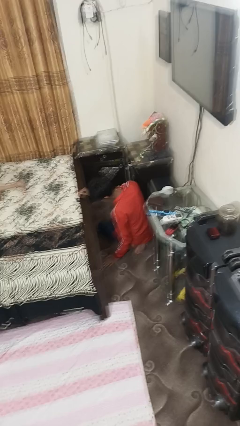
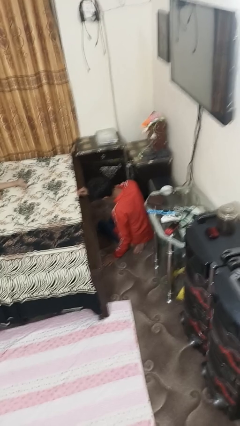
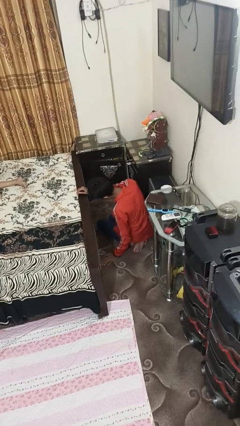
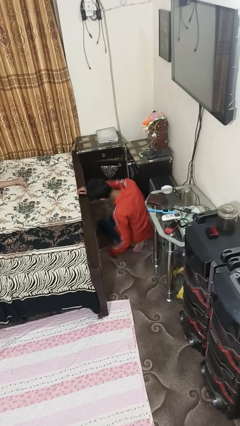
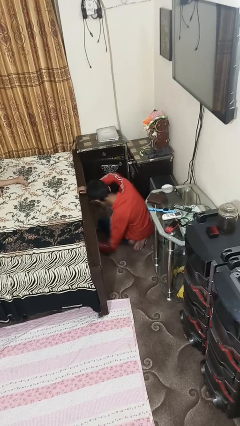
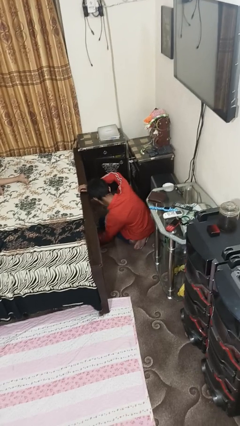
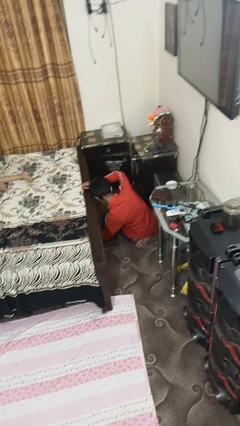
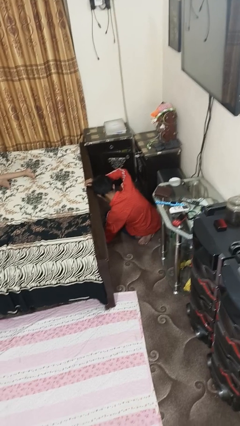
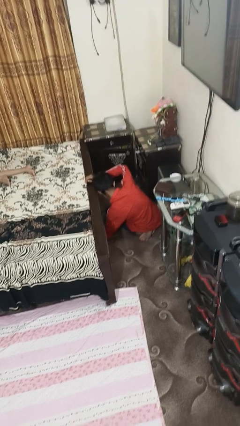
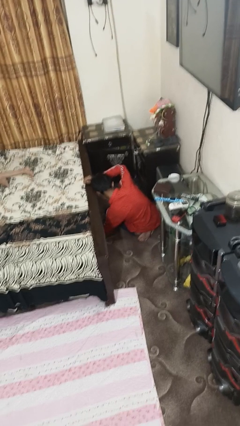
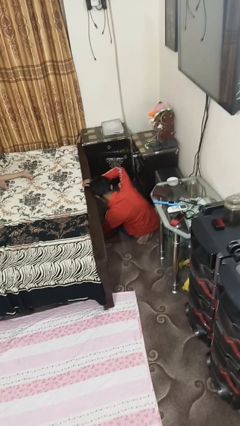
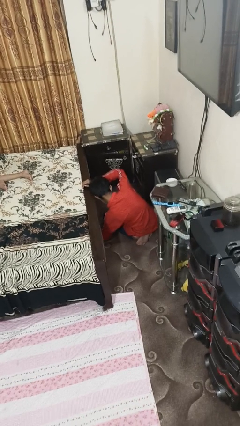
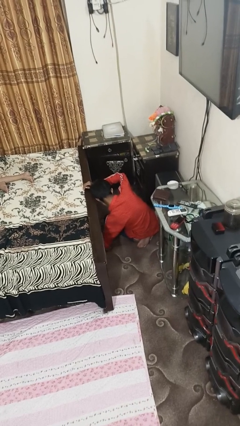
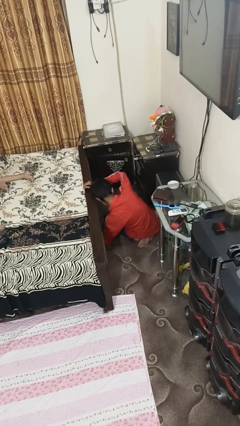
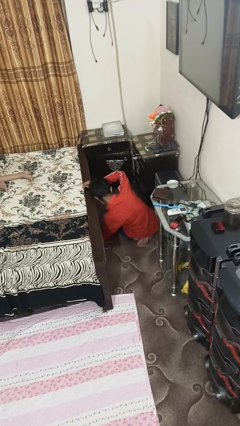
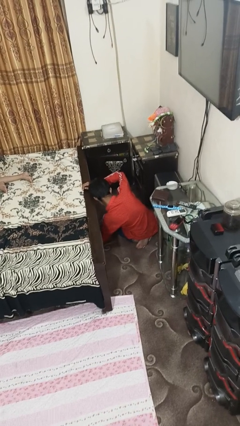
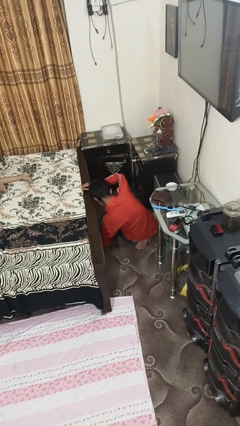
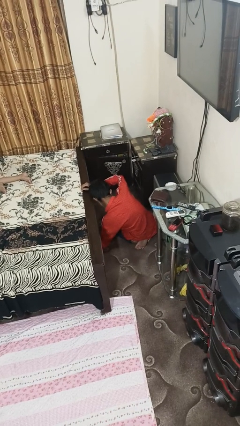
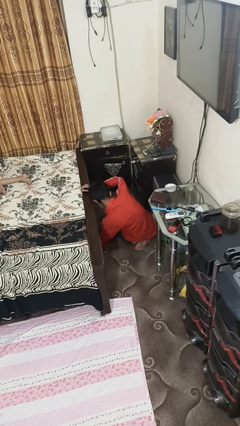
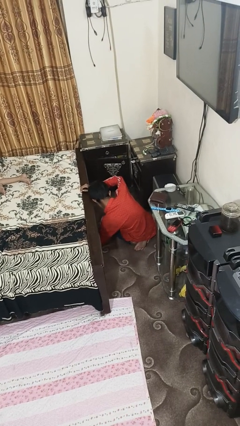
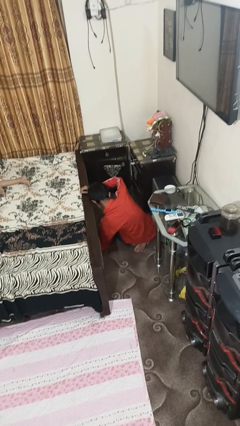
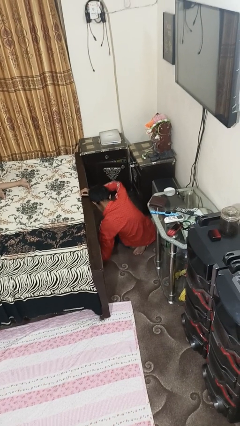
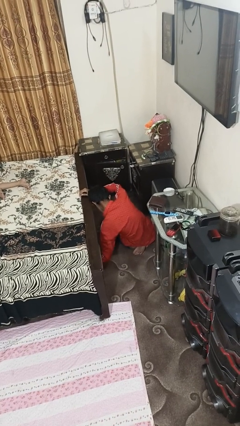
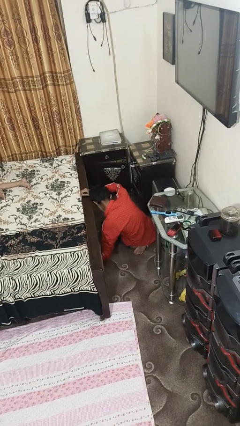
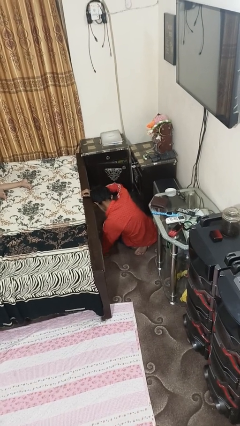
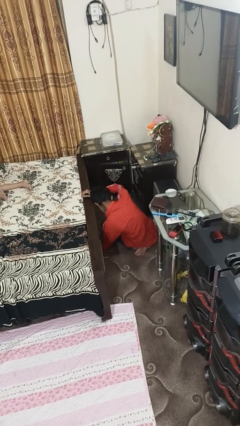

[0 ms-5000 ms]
person searches under bed

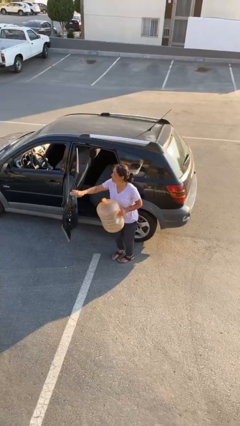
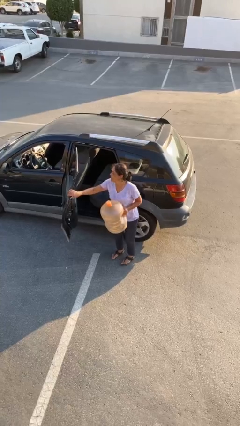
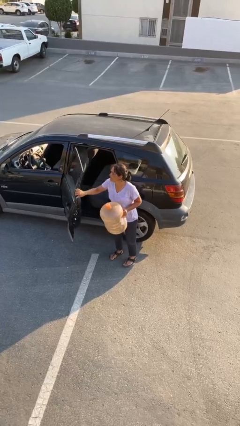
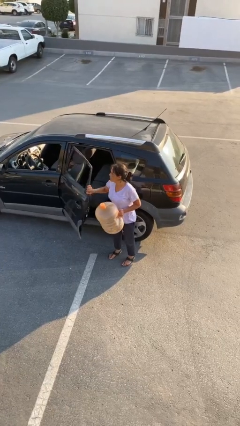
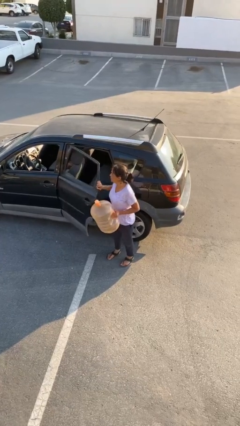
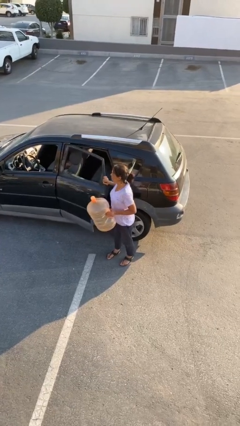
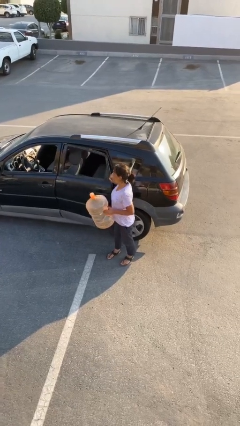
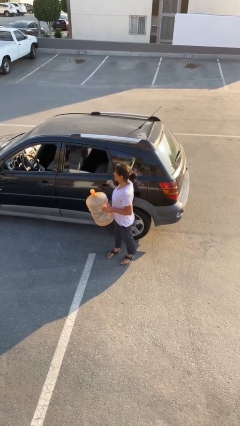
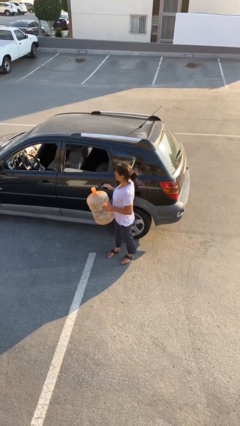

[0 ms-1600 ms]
person closes car door

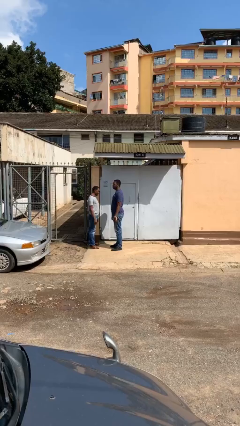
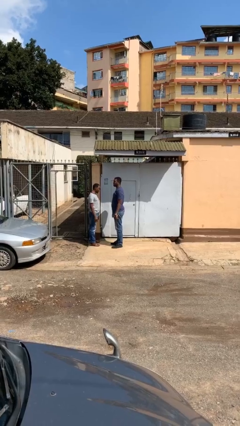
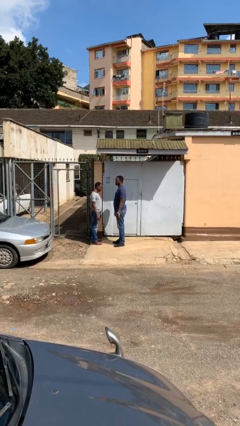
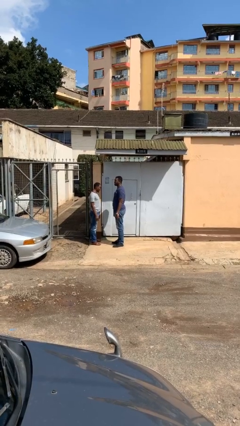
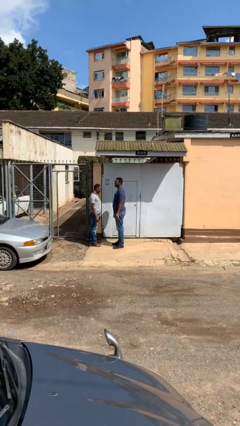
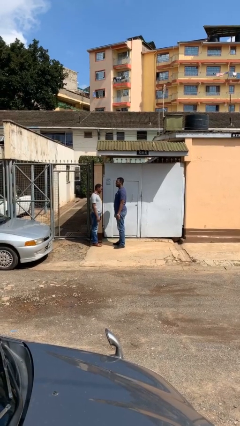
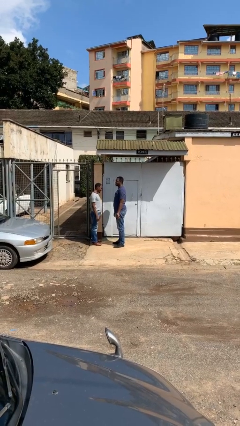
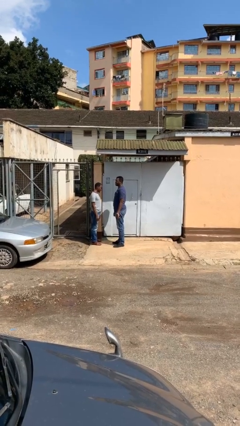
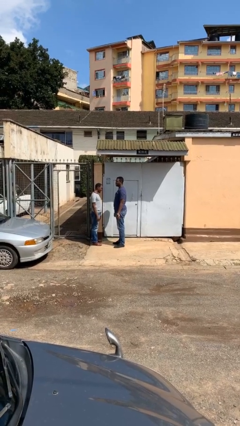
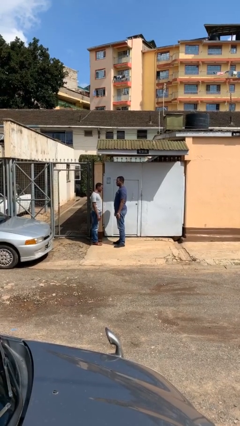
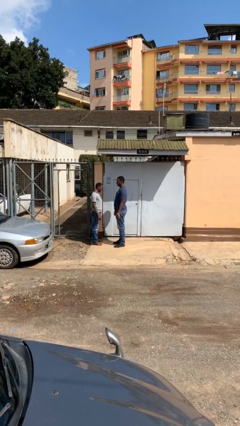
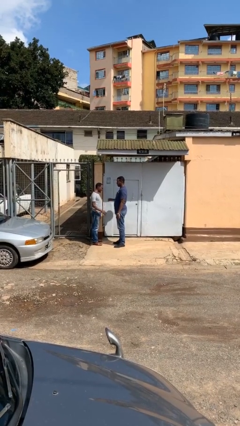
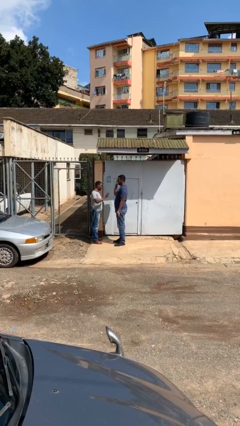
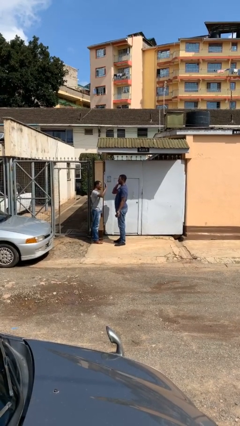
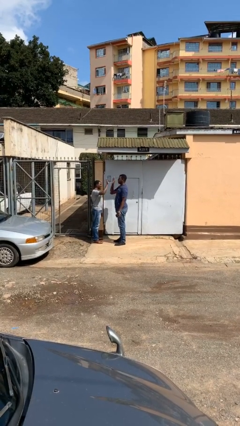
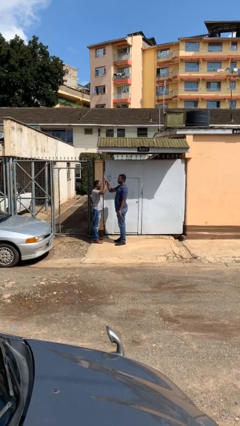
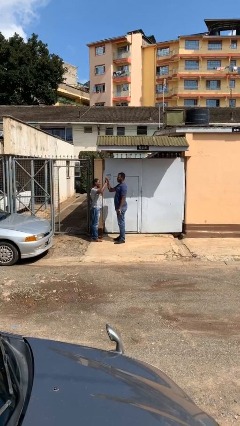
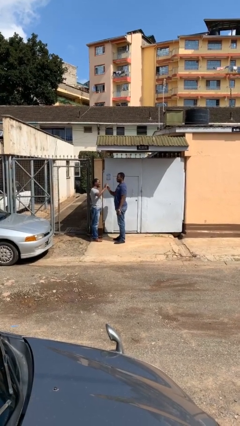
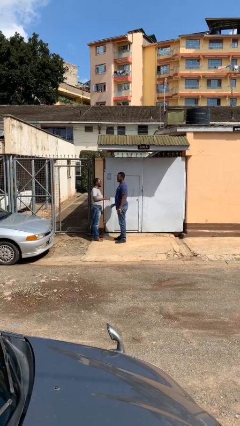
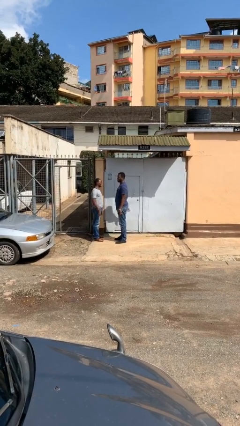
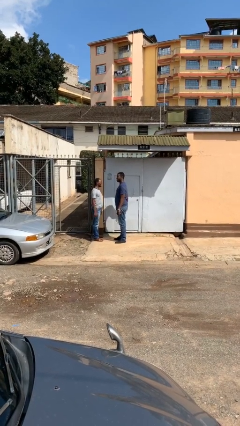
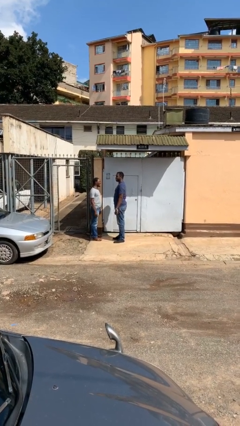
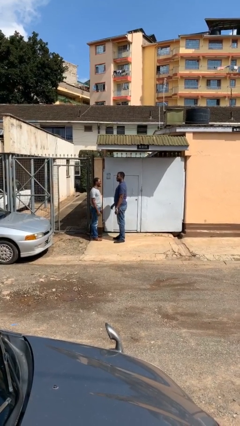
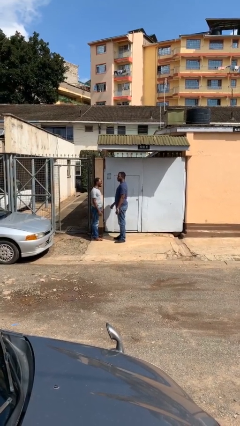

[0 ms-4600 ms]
person highfives hand

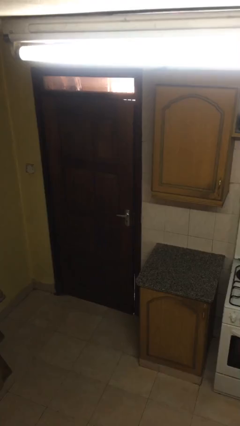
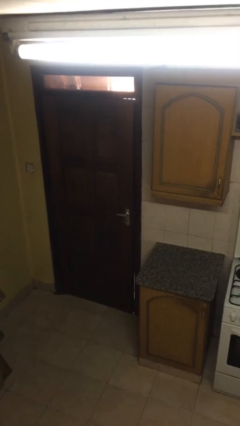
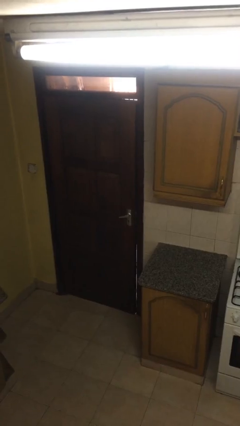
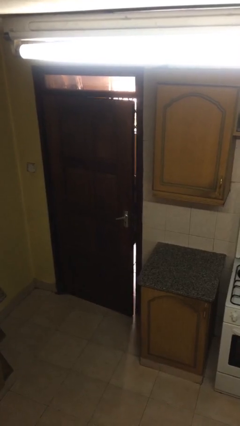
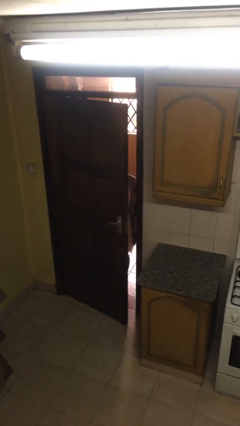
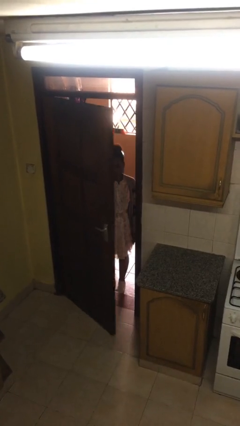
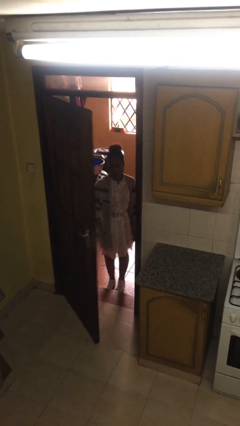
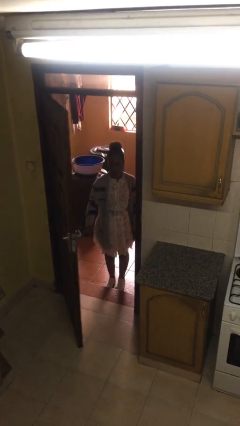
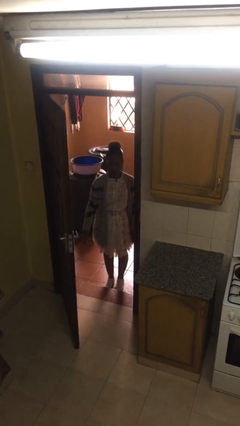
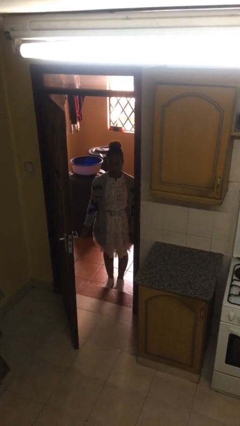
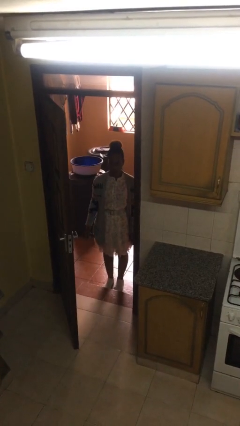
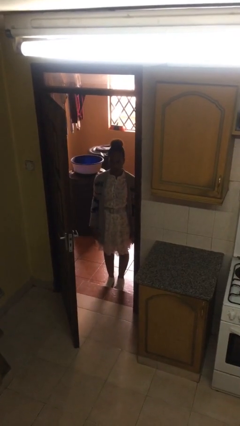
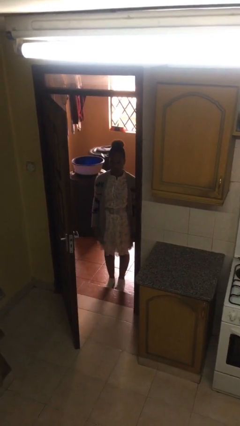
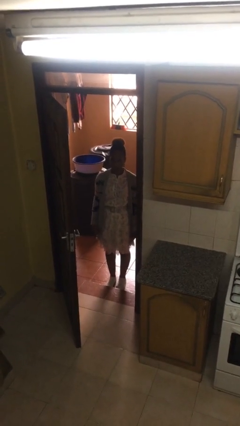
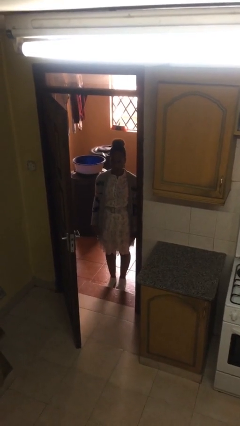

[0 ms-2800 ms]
person opens facility door

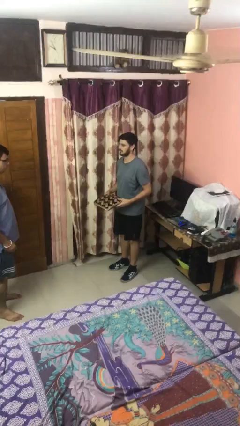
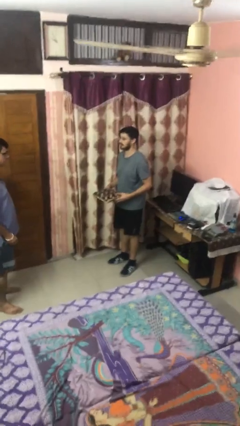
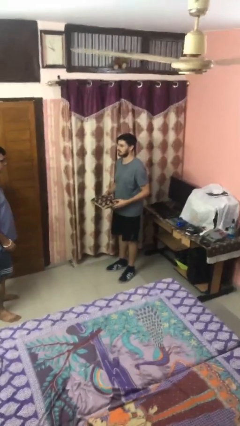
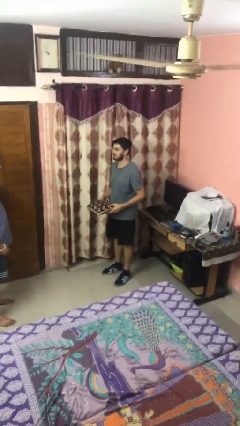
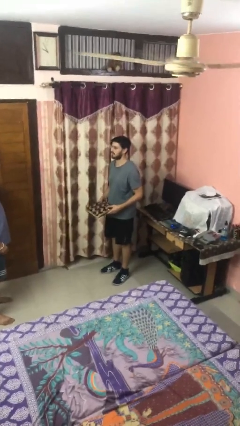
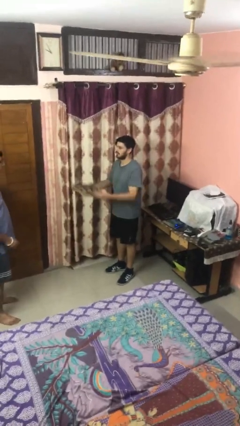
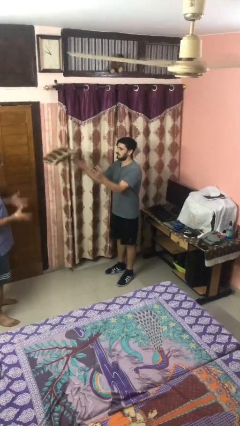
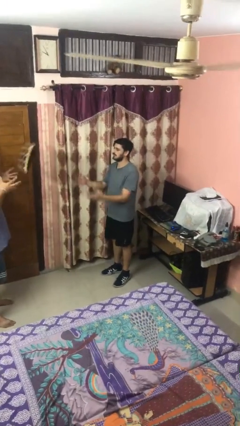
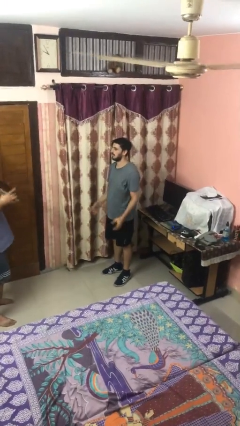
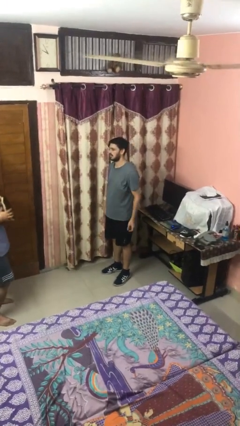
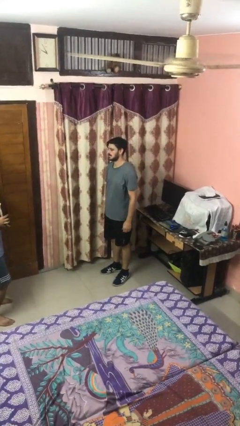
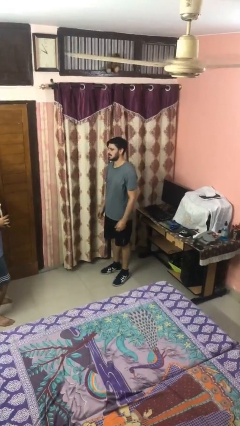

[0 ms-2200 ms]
person throws object to person

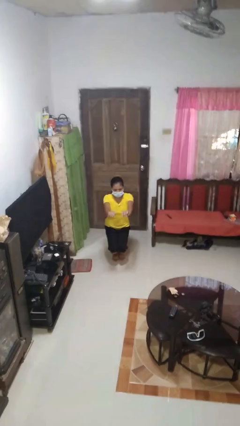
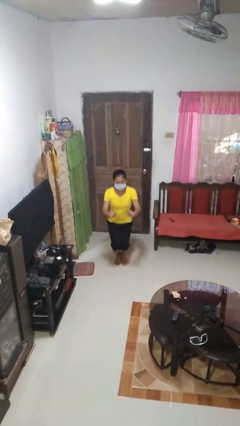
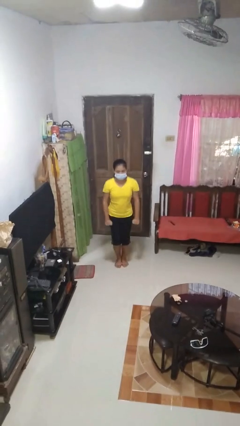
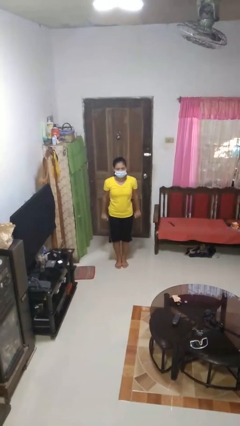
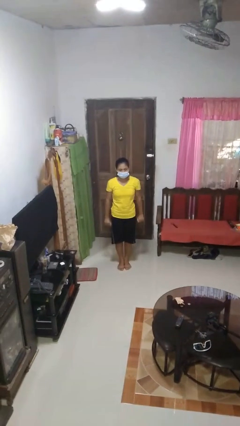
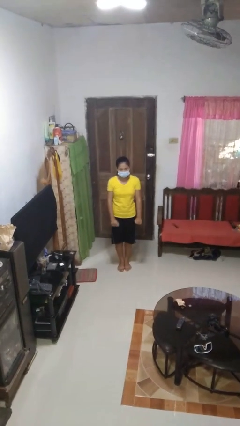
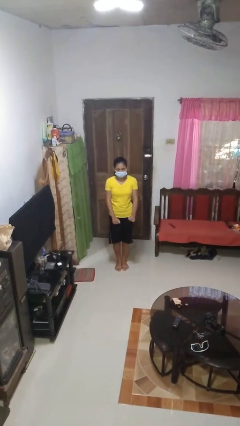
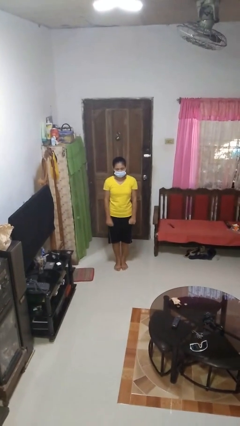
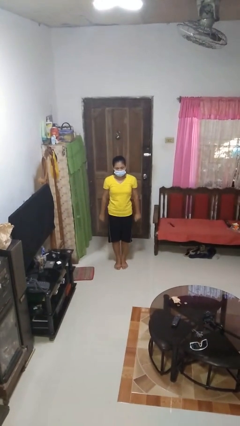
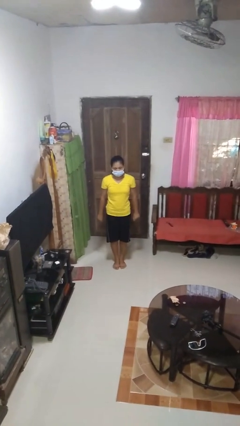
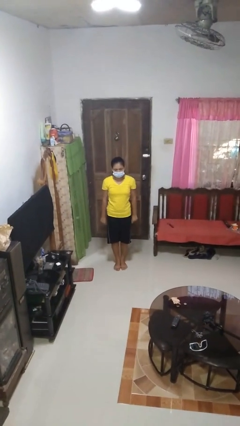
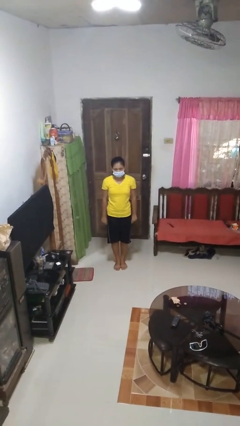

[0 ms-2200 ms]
person stands up
